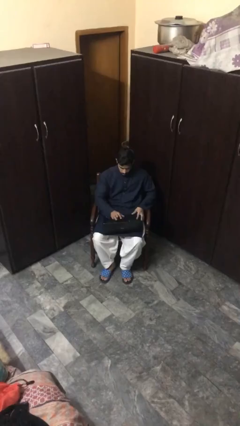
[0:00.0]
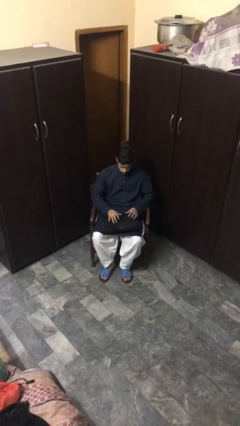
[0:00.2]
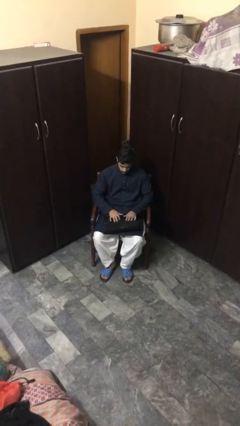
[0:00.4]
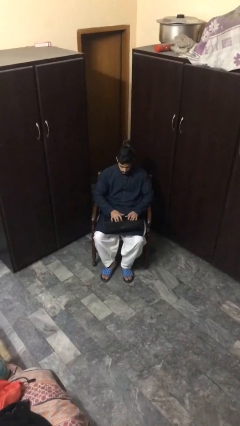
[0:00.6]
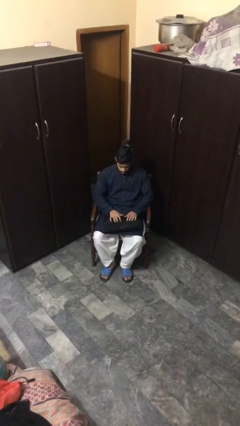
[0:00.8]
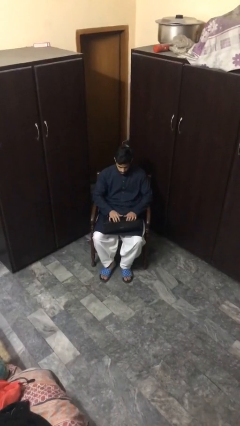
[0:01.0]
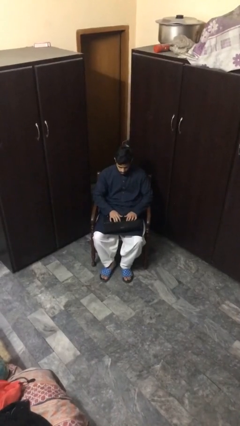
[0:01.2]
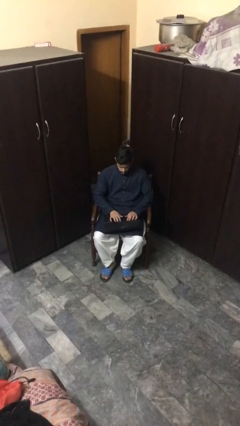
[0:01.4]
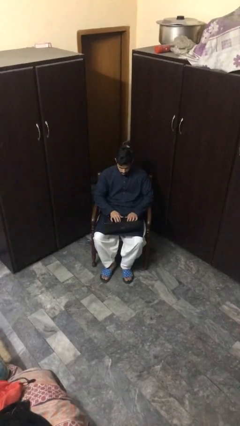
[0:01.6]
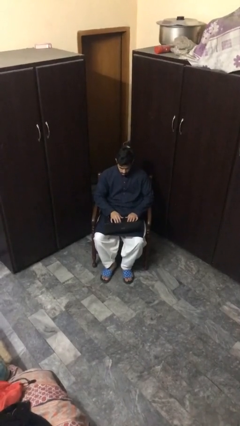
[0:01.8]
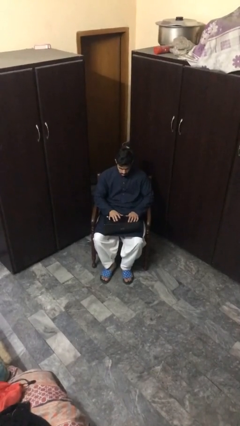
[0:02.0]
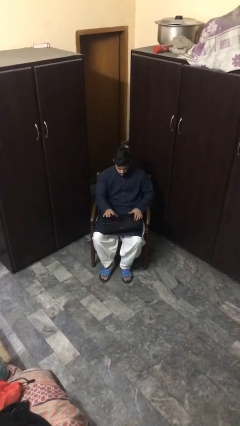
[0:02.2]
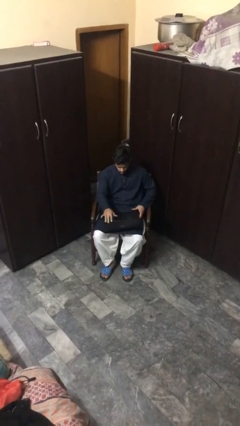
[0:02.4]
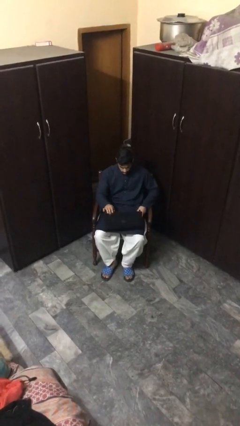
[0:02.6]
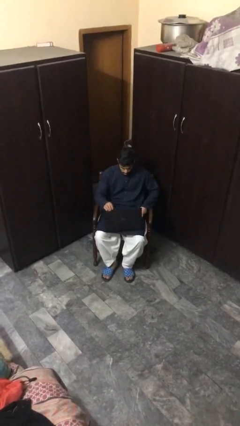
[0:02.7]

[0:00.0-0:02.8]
person interacts with laptop

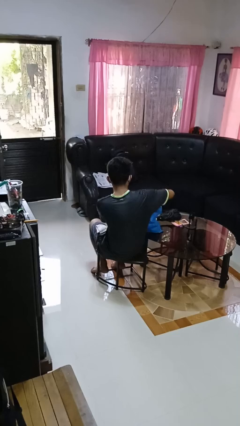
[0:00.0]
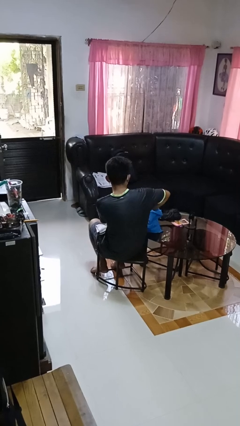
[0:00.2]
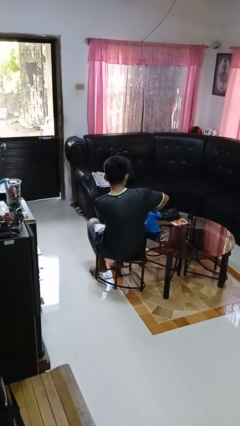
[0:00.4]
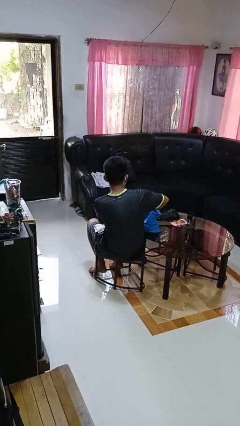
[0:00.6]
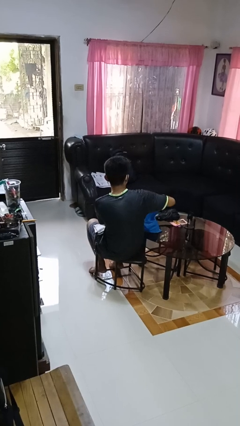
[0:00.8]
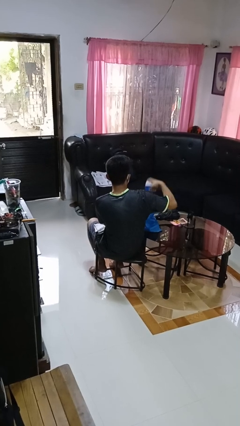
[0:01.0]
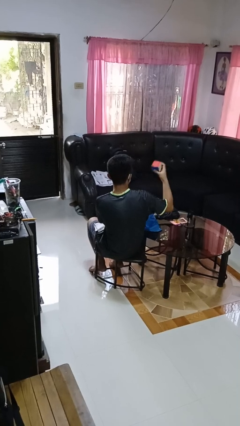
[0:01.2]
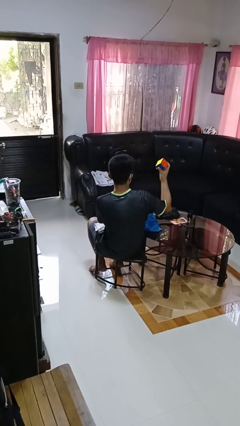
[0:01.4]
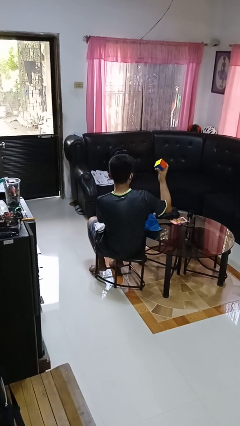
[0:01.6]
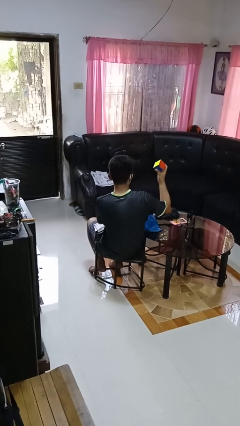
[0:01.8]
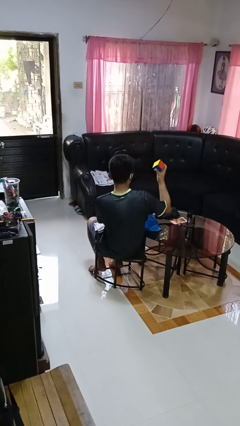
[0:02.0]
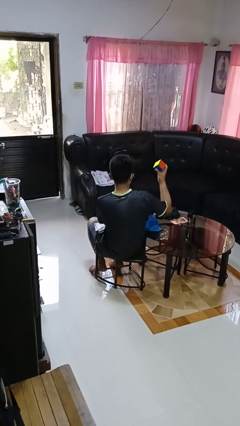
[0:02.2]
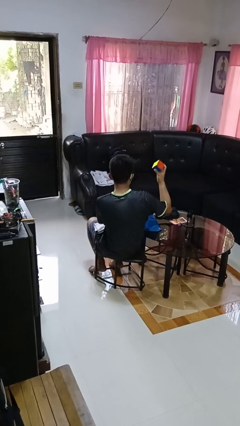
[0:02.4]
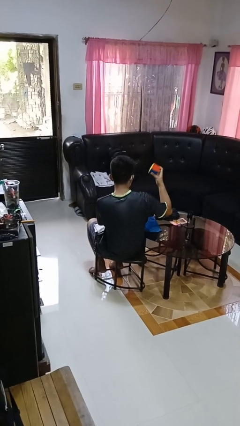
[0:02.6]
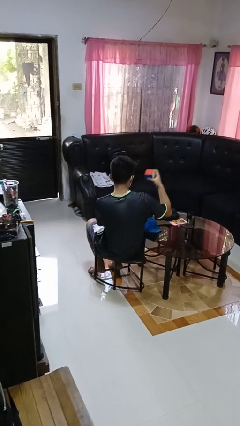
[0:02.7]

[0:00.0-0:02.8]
person takes object from bag

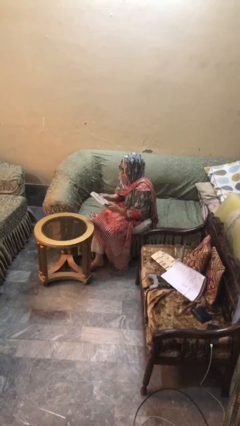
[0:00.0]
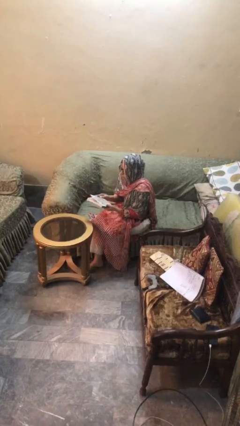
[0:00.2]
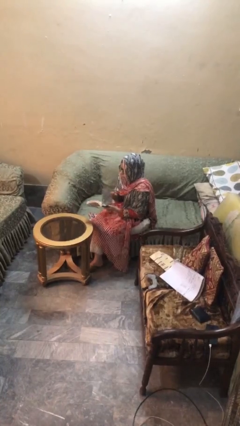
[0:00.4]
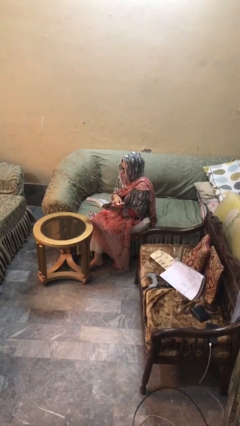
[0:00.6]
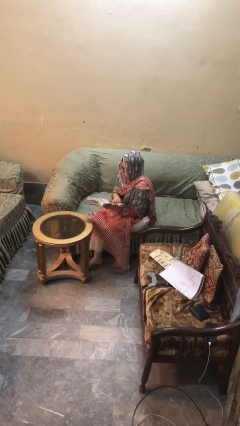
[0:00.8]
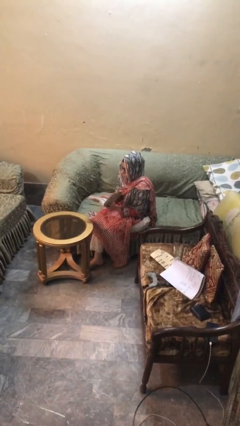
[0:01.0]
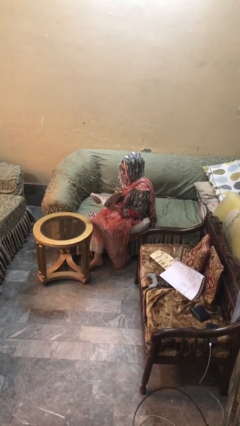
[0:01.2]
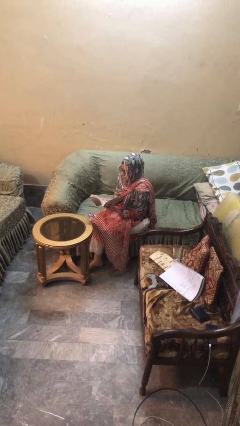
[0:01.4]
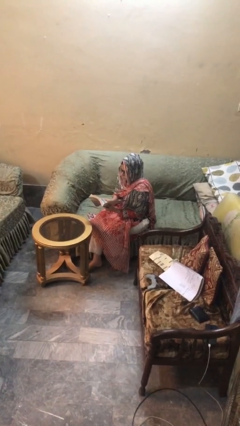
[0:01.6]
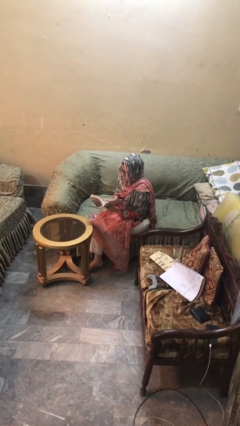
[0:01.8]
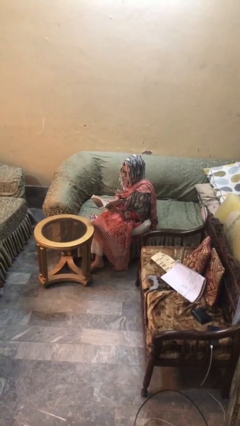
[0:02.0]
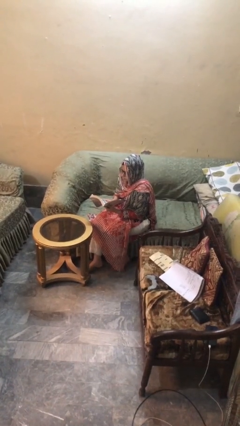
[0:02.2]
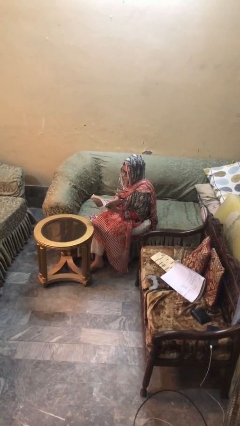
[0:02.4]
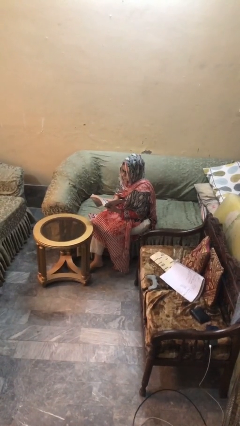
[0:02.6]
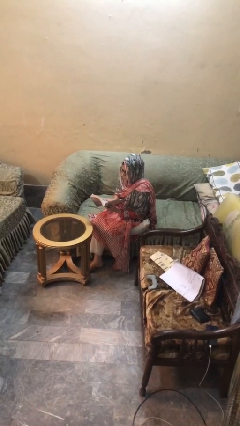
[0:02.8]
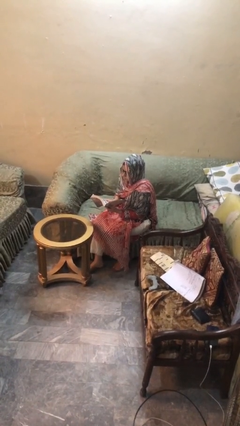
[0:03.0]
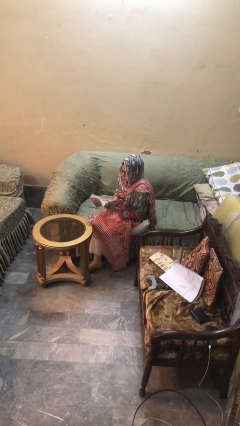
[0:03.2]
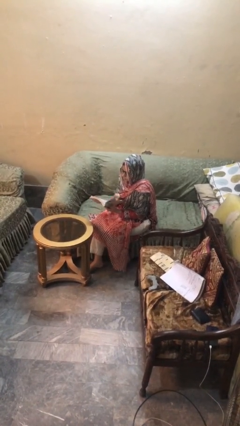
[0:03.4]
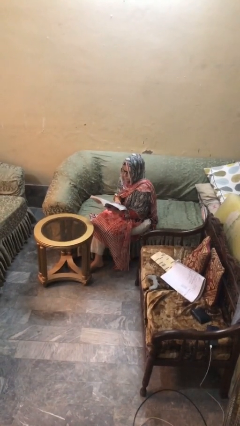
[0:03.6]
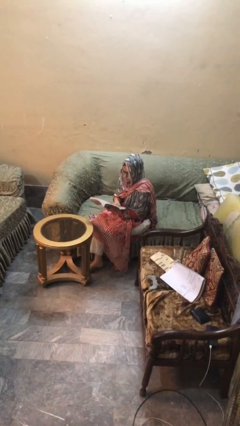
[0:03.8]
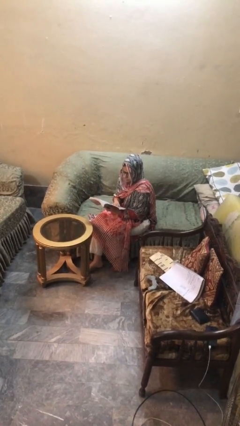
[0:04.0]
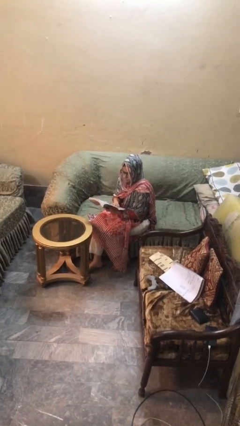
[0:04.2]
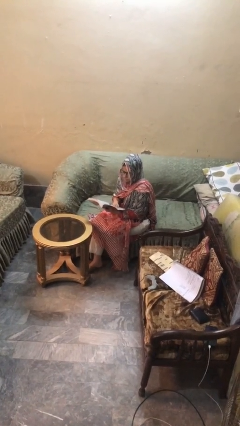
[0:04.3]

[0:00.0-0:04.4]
person reads book

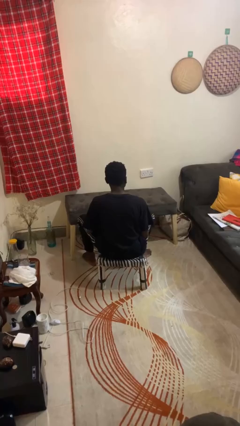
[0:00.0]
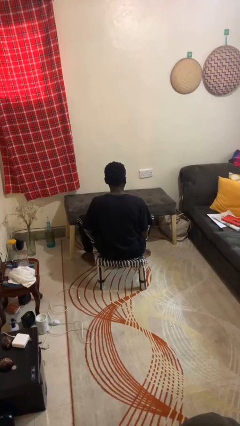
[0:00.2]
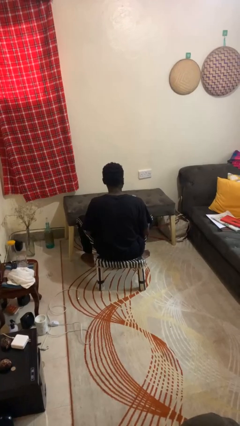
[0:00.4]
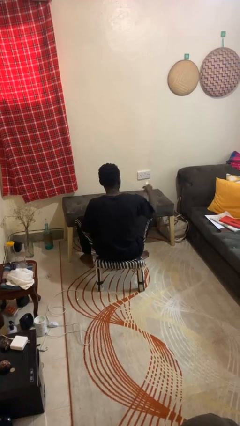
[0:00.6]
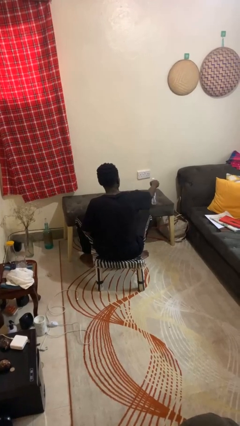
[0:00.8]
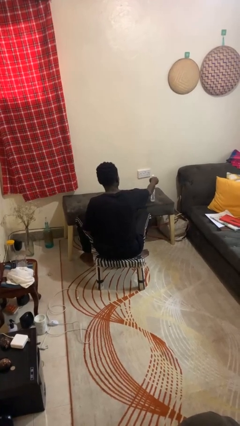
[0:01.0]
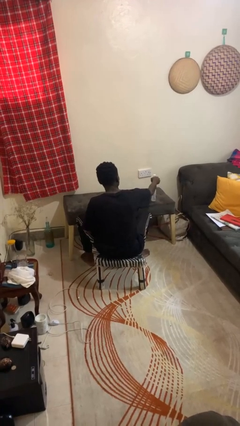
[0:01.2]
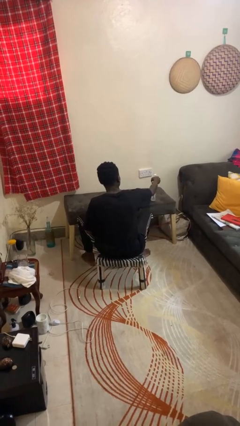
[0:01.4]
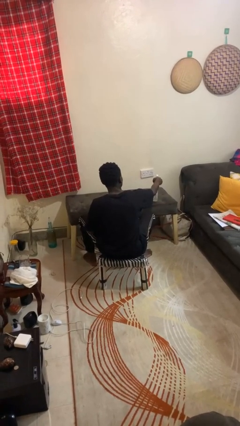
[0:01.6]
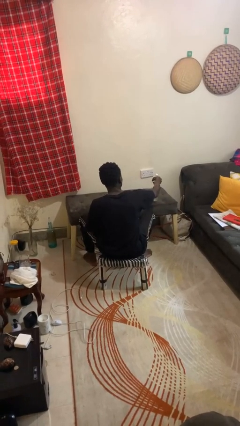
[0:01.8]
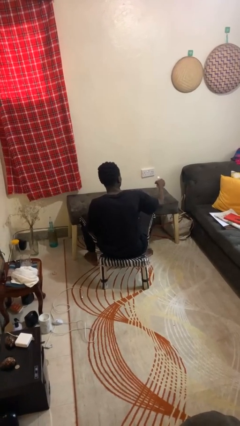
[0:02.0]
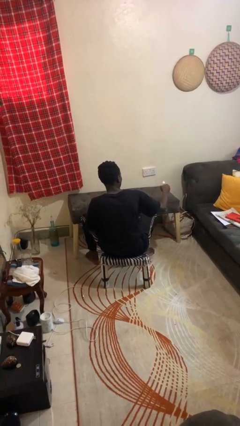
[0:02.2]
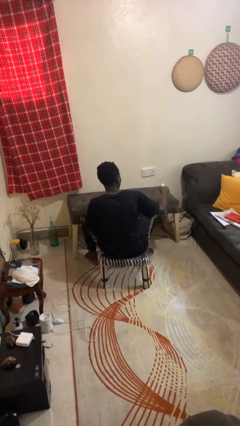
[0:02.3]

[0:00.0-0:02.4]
person sprays from bottle

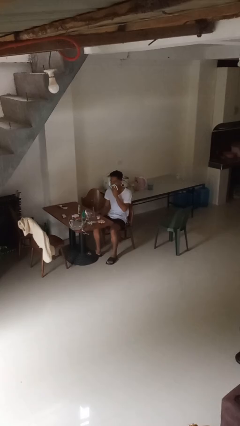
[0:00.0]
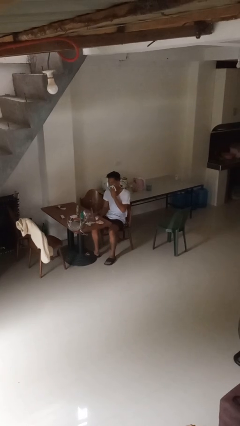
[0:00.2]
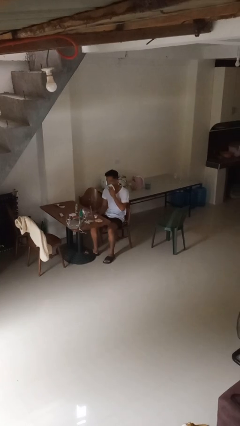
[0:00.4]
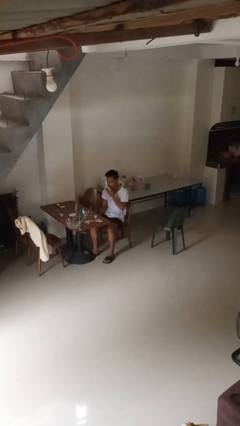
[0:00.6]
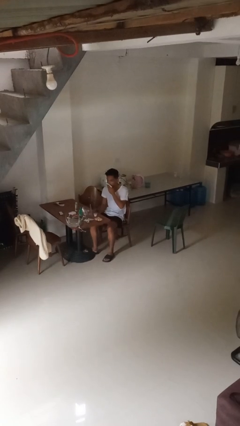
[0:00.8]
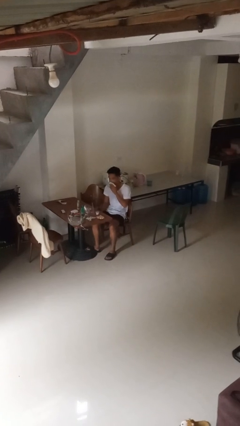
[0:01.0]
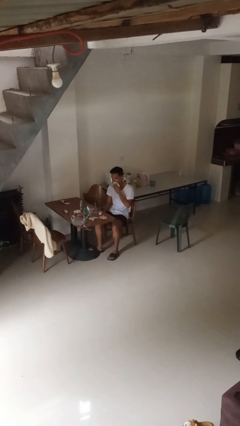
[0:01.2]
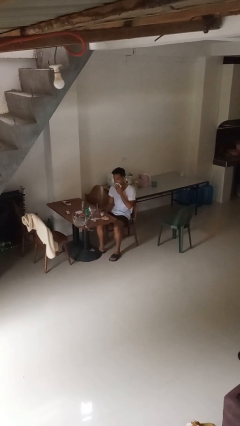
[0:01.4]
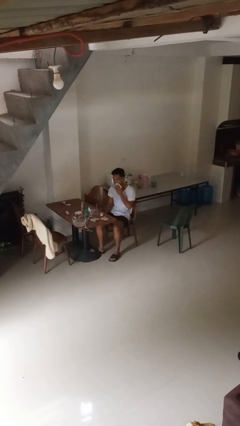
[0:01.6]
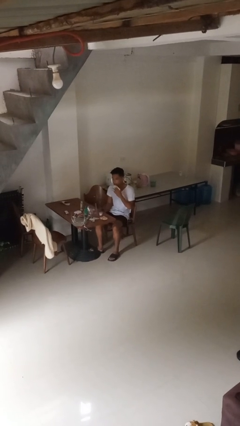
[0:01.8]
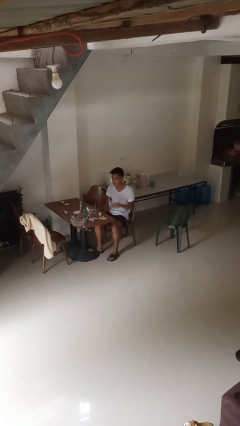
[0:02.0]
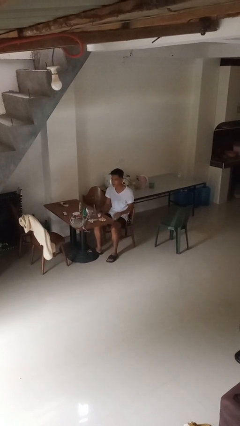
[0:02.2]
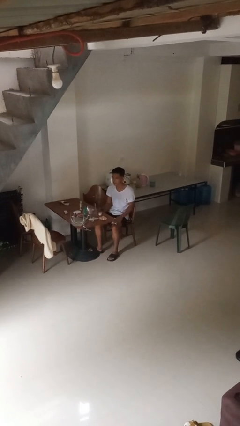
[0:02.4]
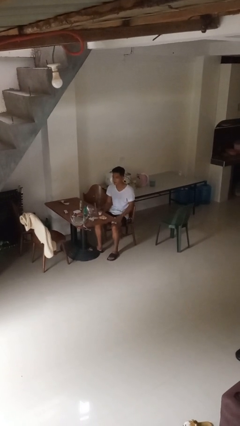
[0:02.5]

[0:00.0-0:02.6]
person wipes mouth with napkin

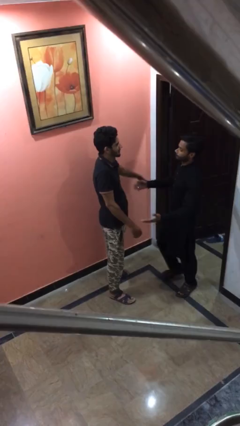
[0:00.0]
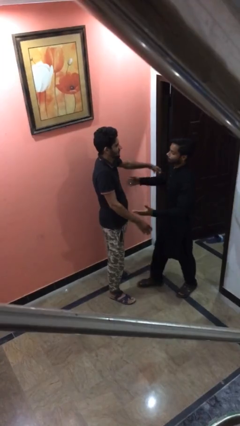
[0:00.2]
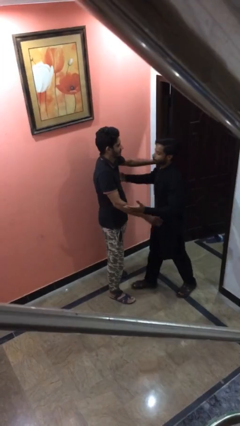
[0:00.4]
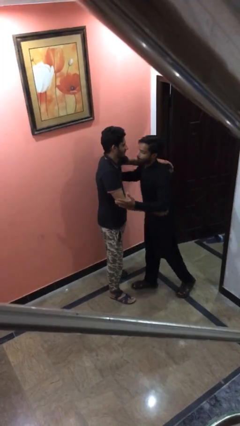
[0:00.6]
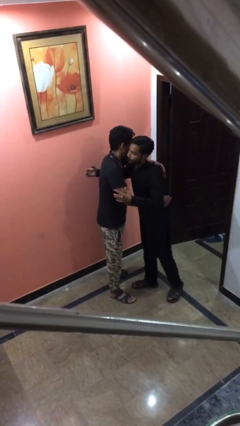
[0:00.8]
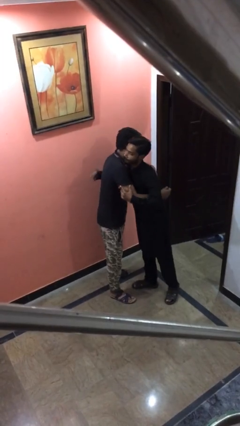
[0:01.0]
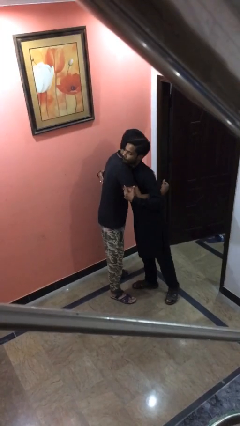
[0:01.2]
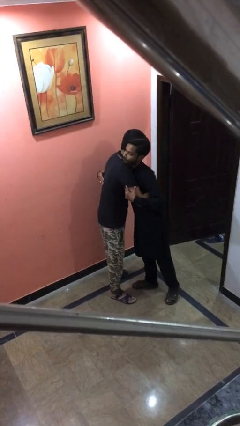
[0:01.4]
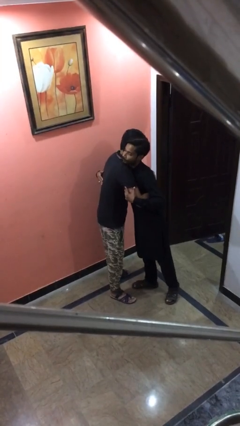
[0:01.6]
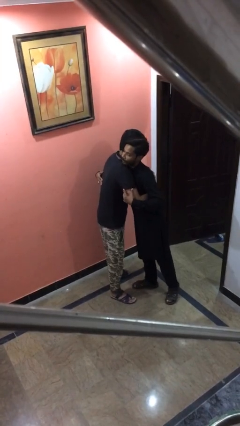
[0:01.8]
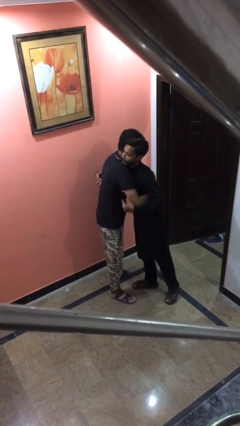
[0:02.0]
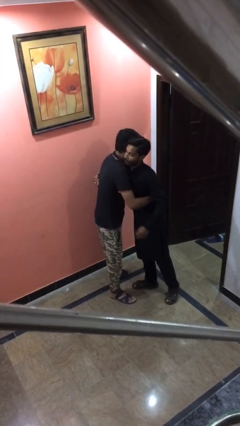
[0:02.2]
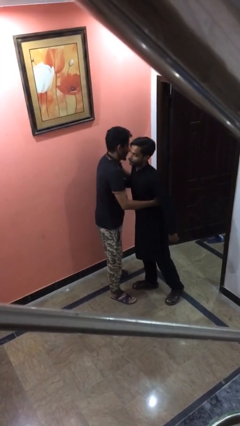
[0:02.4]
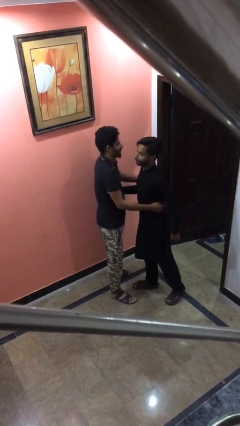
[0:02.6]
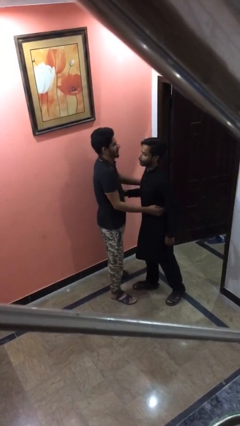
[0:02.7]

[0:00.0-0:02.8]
person embraces person
